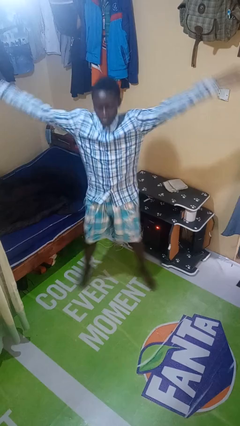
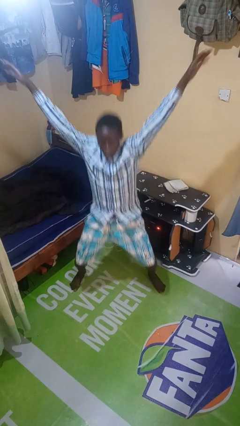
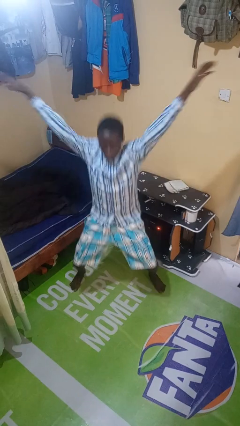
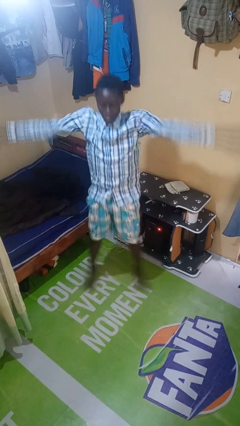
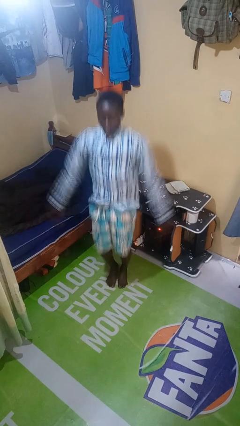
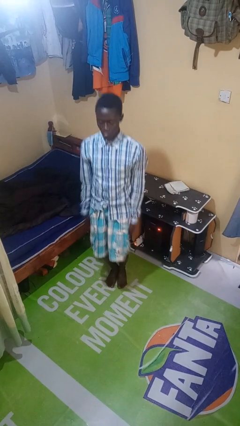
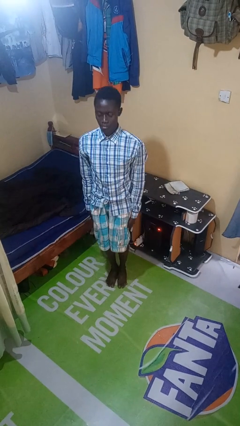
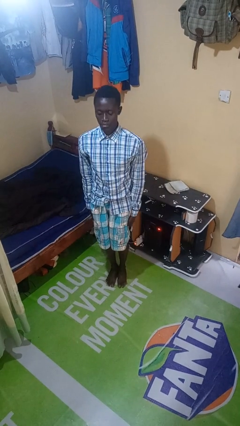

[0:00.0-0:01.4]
person exercises with jumping jacks

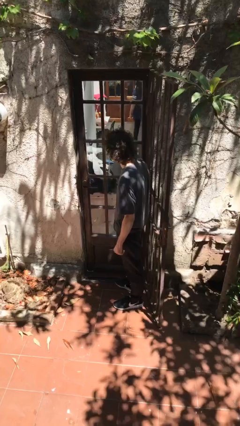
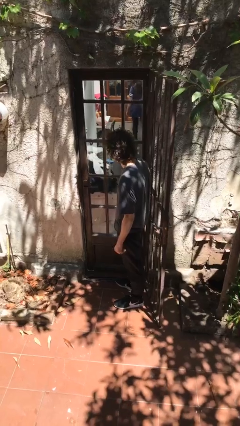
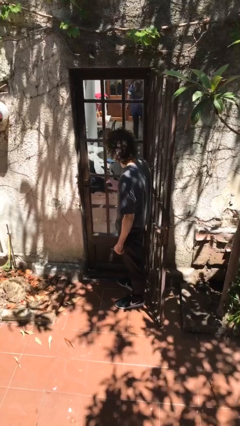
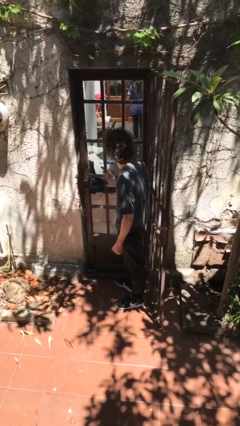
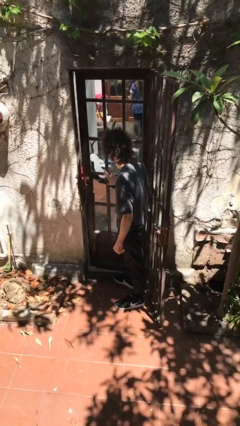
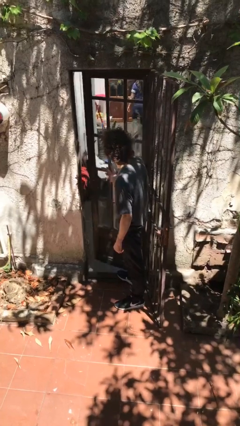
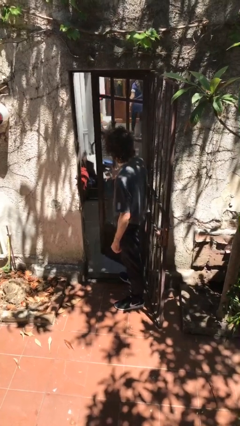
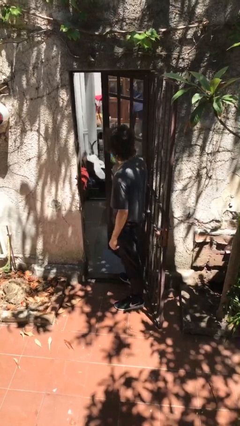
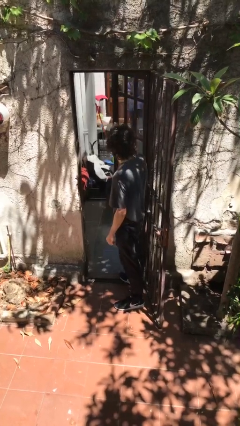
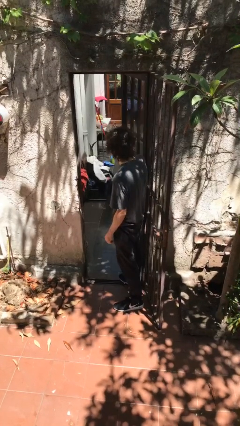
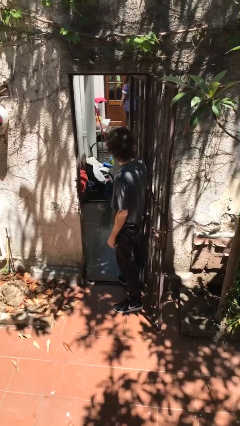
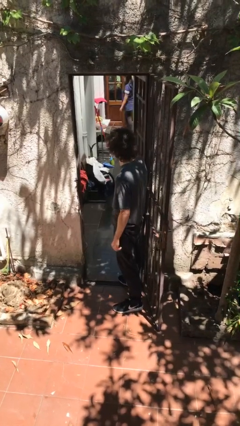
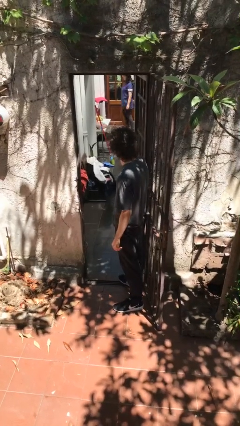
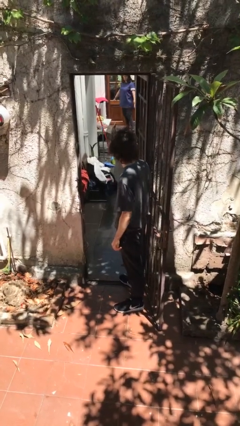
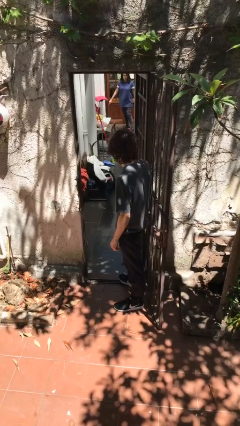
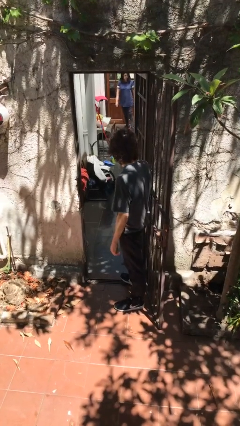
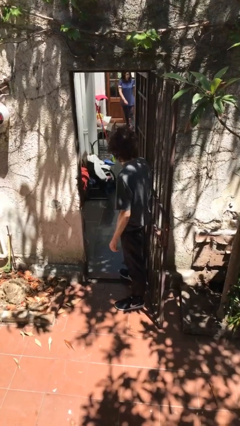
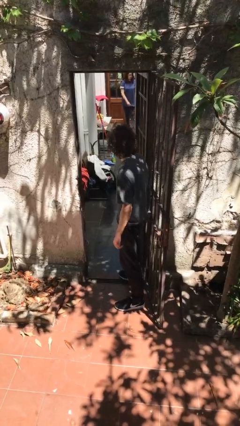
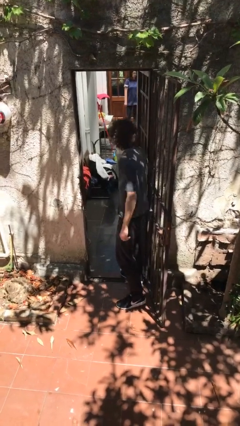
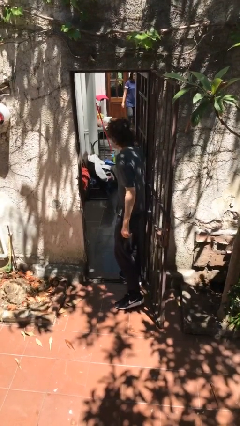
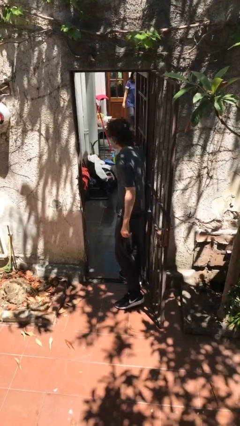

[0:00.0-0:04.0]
person opens facility door

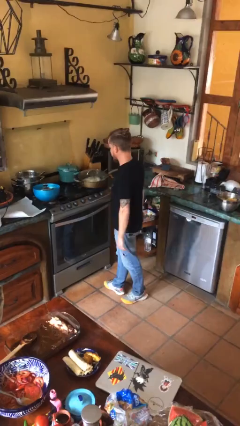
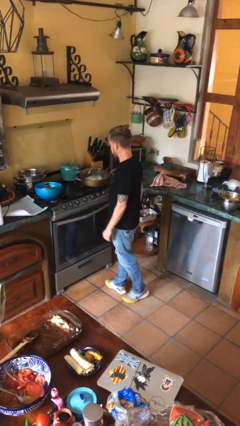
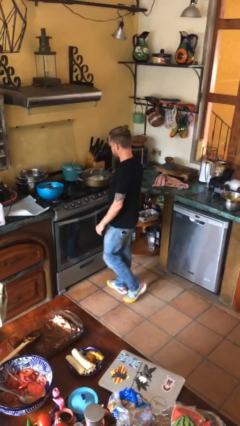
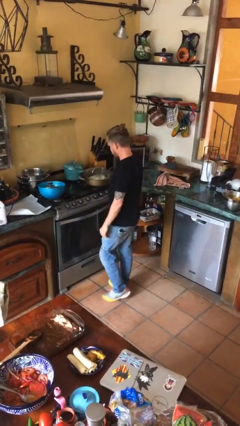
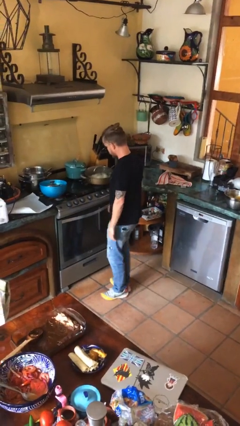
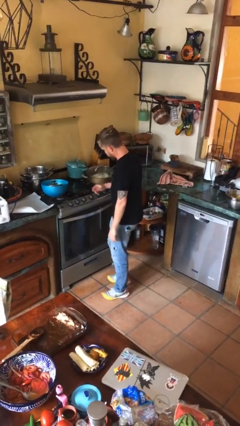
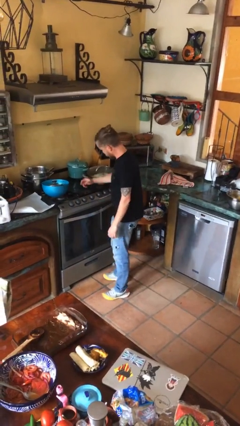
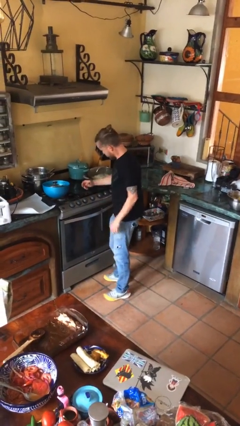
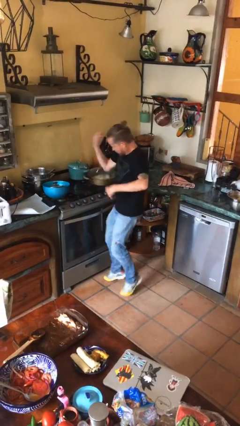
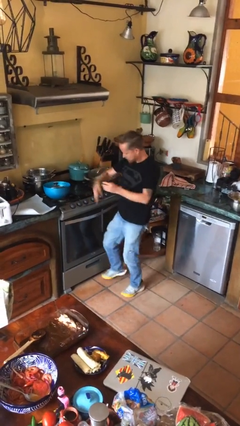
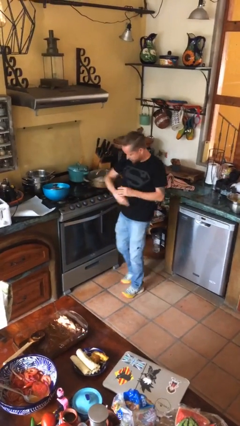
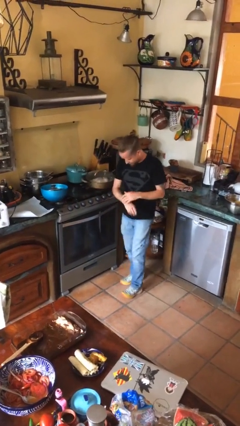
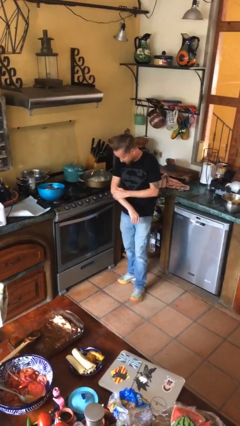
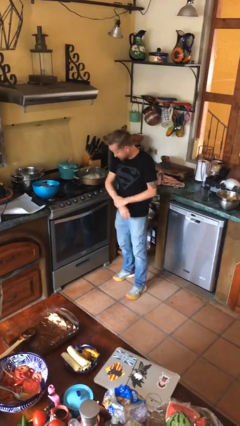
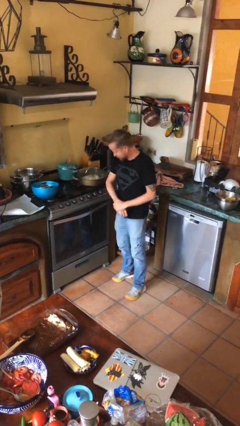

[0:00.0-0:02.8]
person burns hand

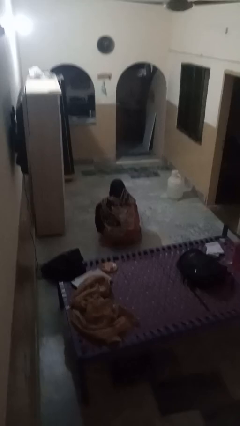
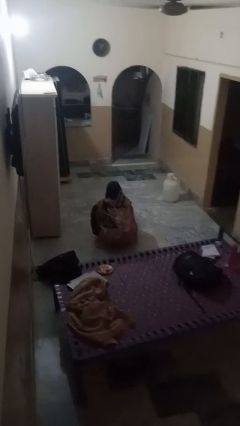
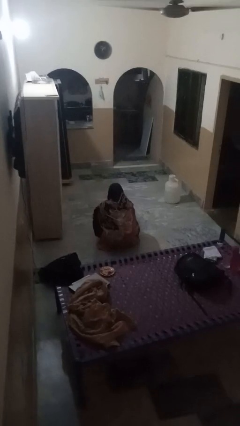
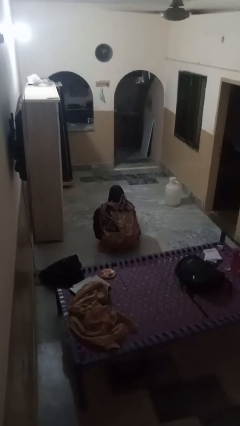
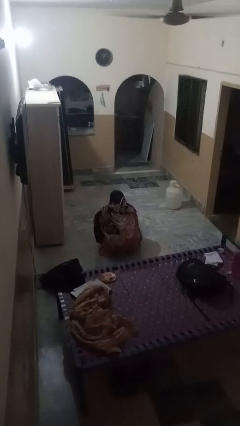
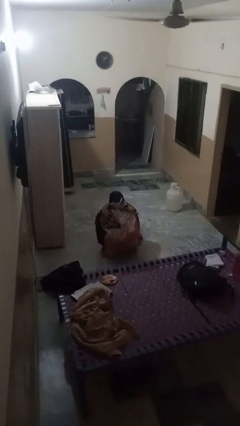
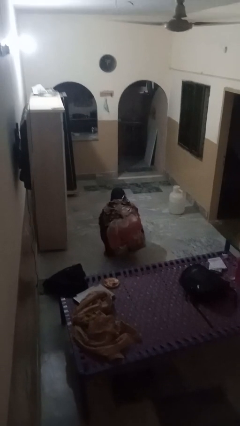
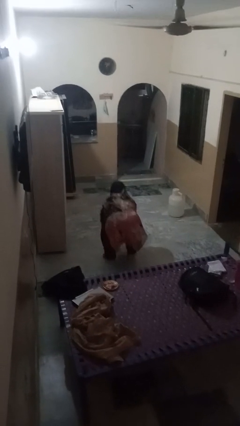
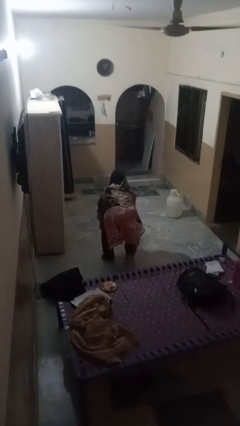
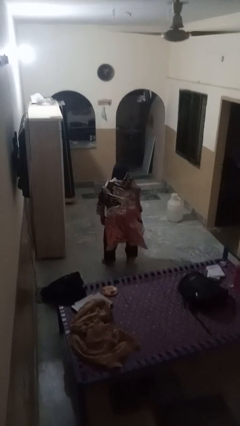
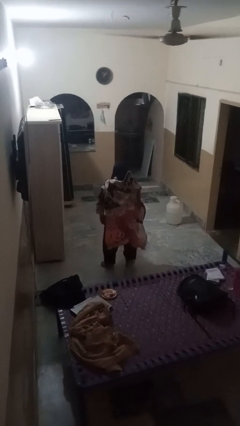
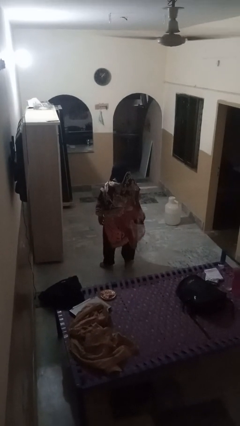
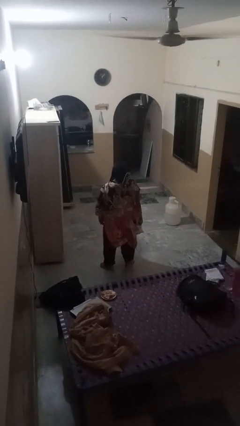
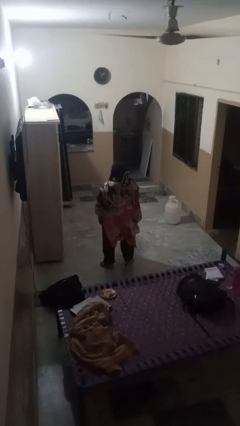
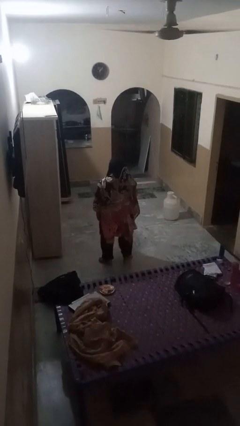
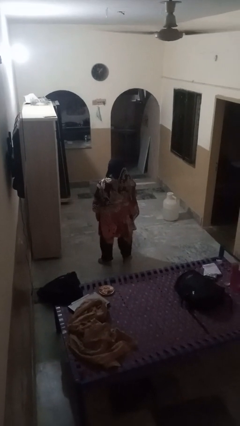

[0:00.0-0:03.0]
person stands up

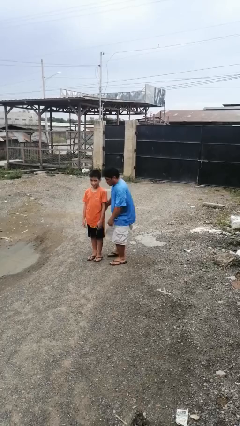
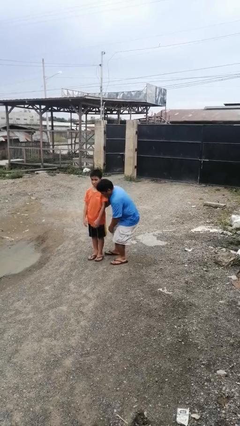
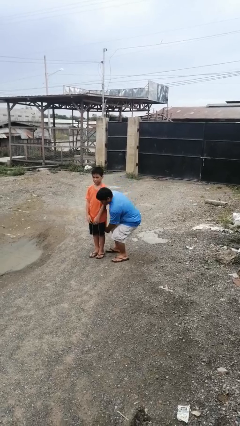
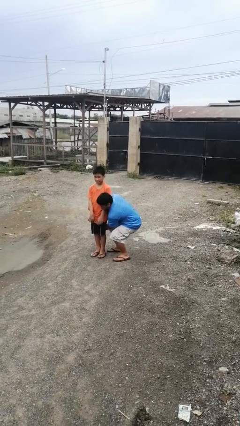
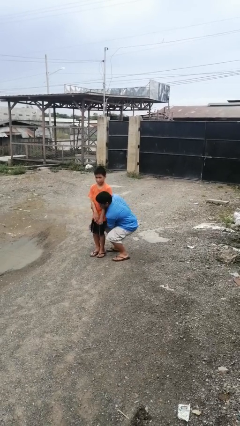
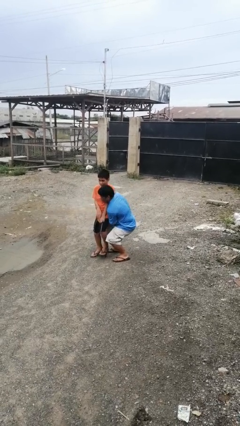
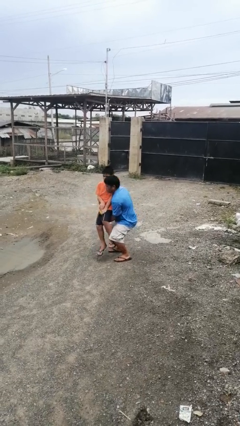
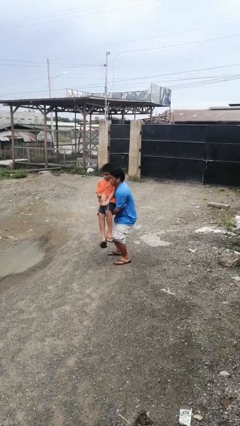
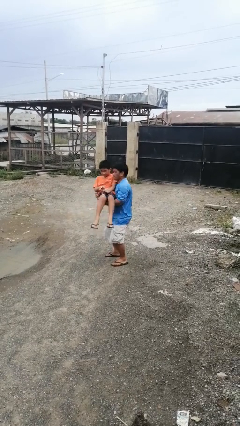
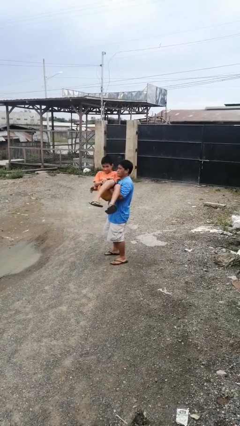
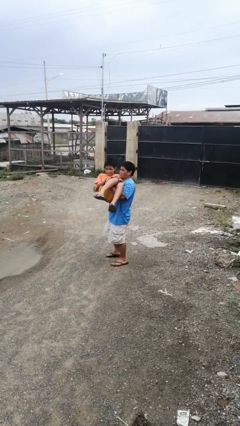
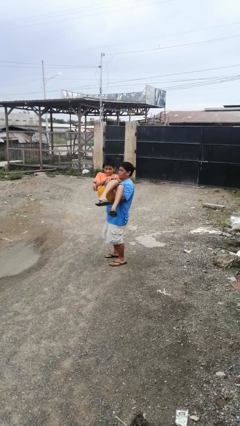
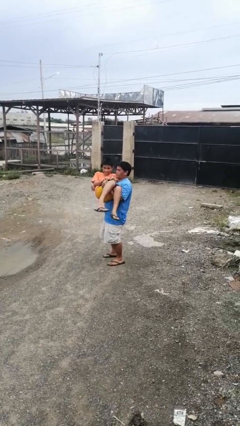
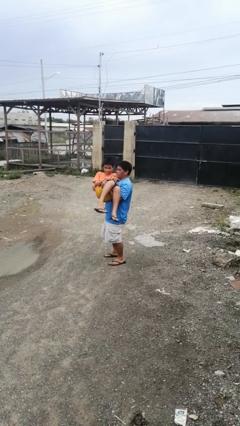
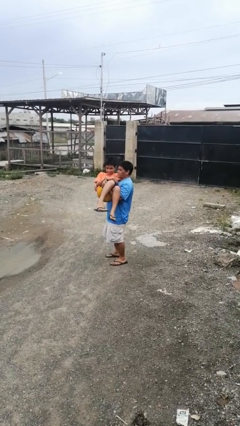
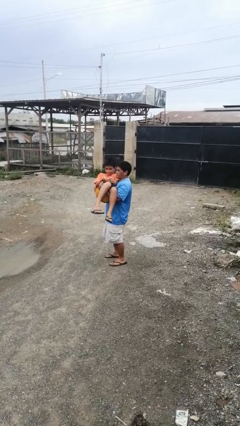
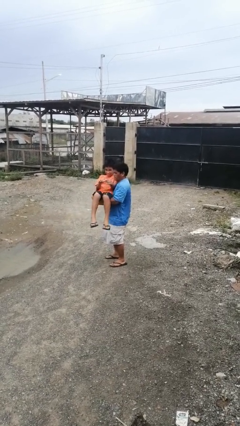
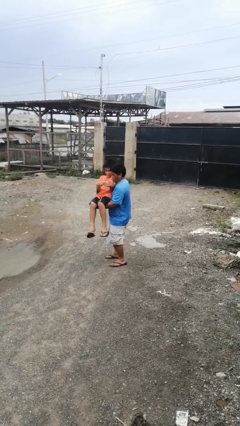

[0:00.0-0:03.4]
person picks up person

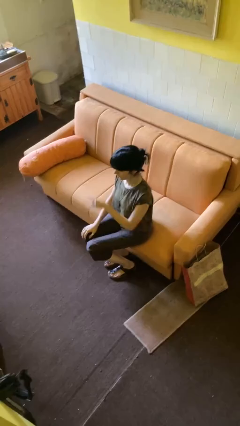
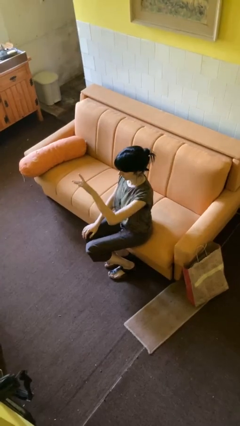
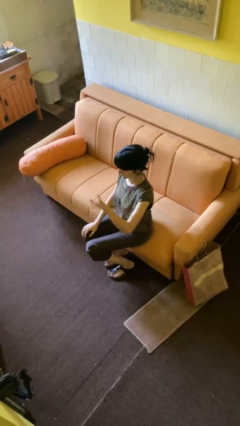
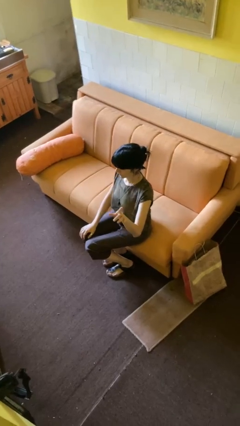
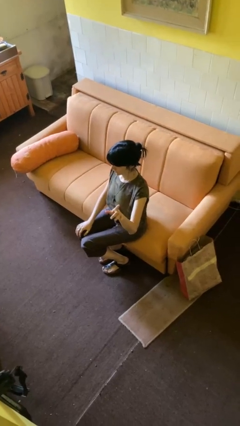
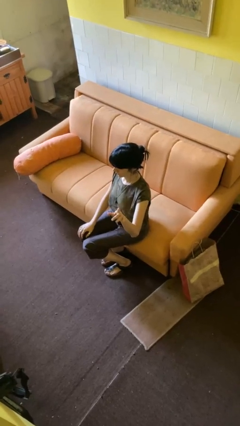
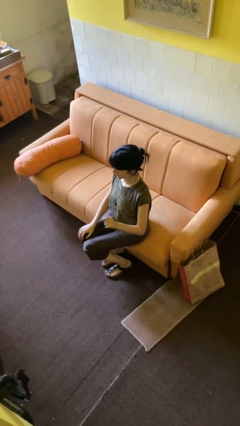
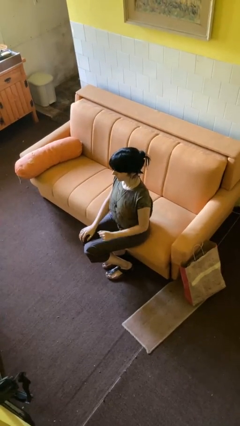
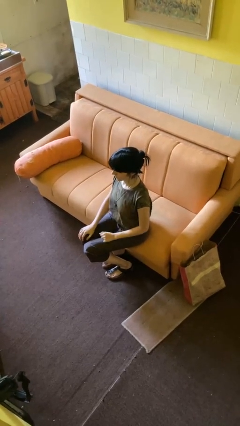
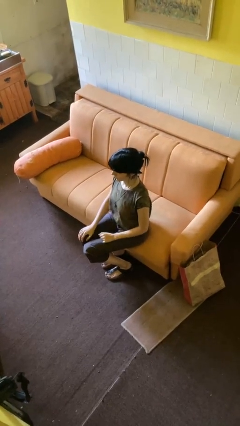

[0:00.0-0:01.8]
person gestures swipe left

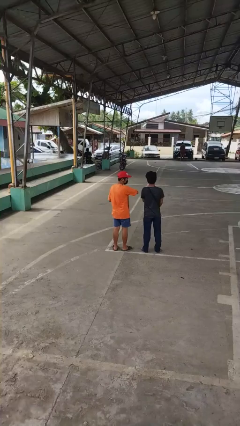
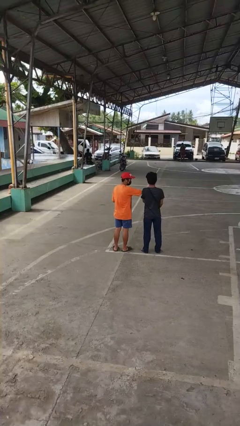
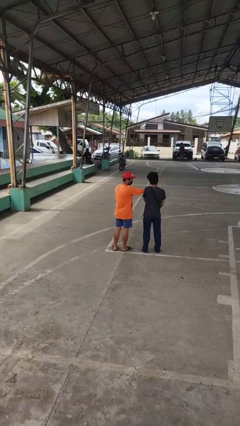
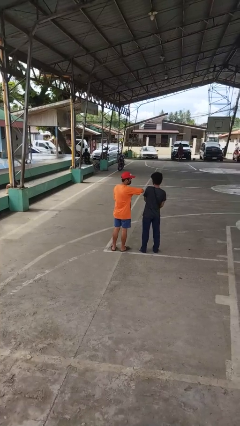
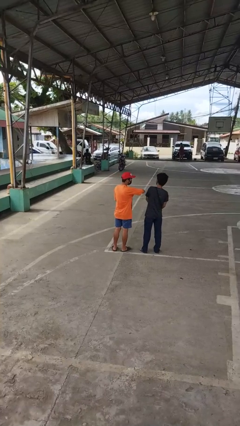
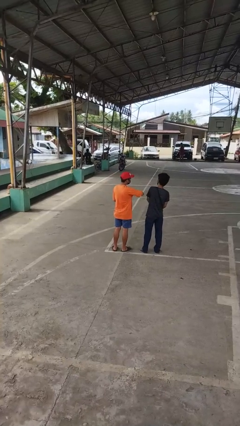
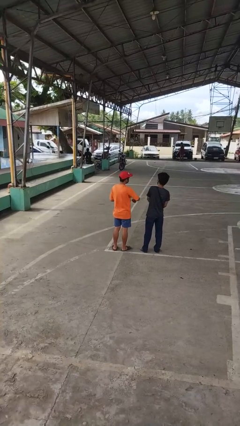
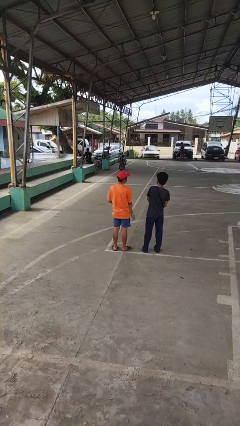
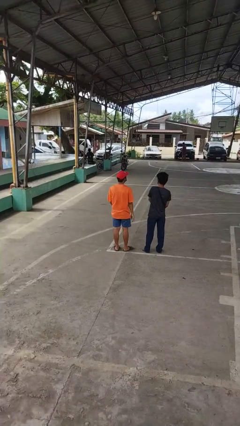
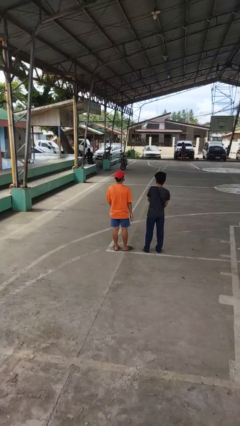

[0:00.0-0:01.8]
person nudges person with elbow
